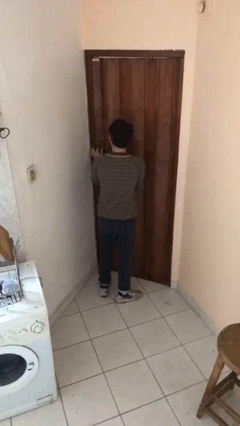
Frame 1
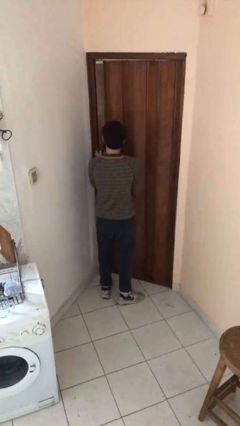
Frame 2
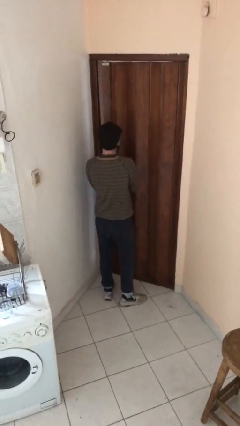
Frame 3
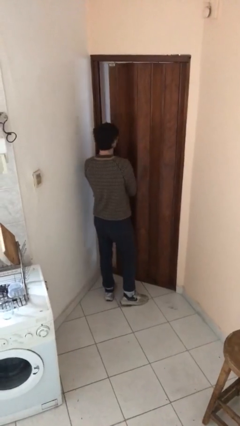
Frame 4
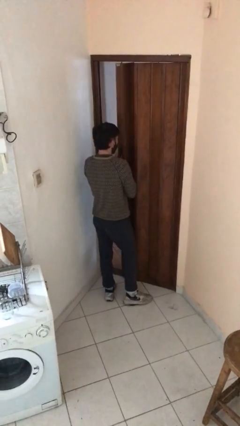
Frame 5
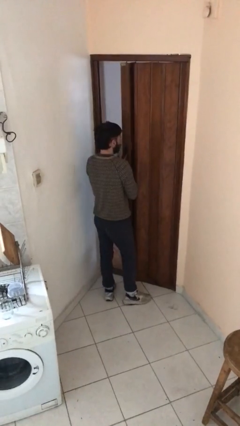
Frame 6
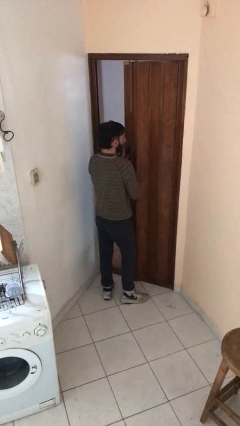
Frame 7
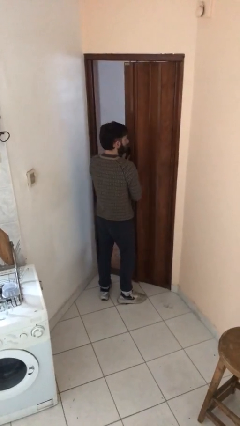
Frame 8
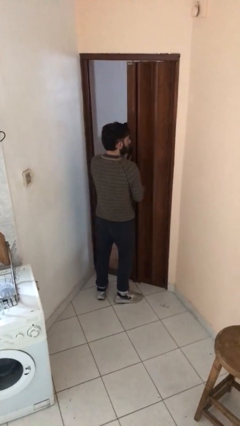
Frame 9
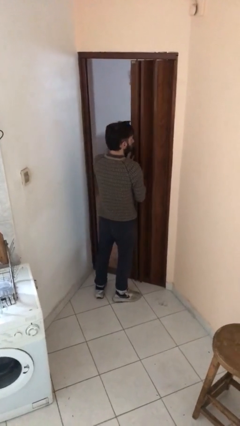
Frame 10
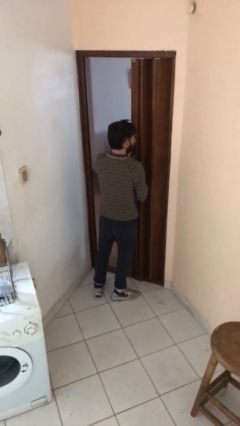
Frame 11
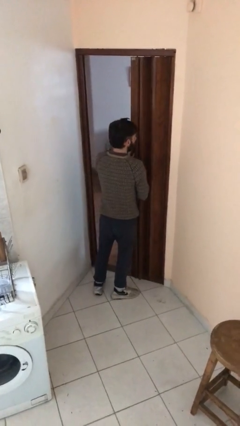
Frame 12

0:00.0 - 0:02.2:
person opens sliding door

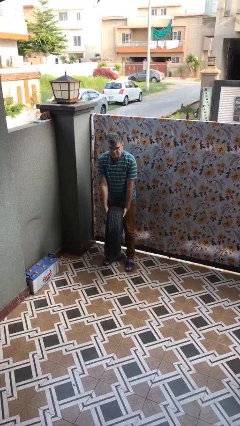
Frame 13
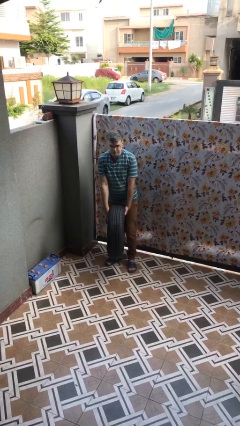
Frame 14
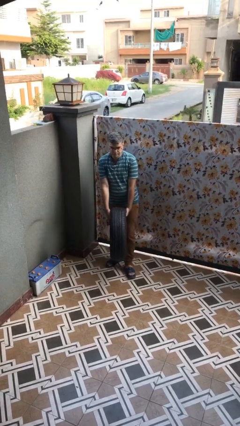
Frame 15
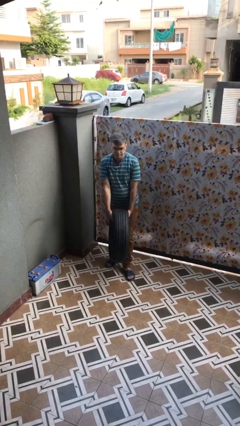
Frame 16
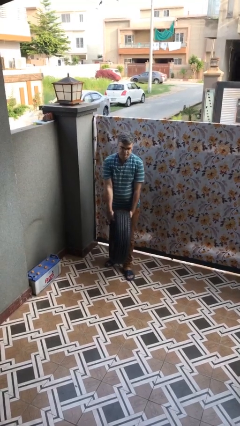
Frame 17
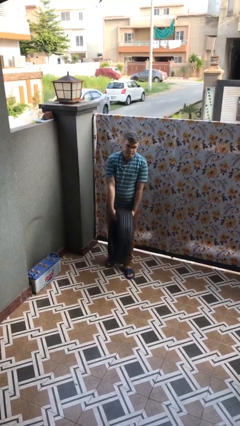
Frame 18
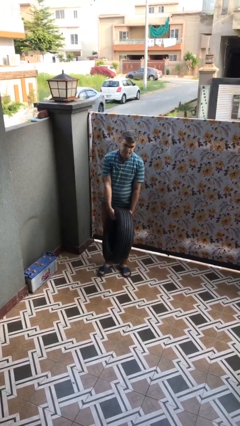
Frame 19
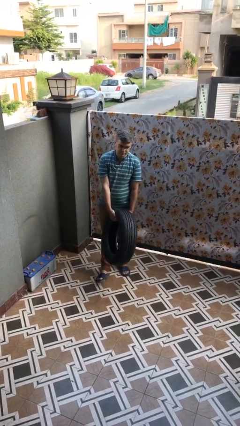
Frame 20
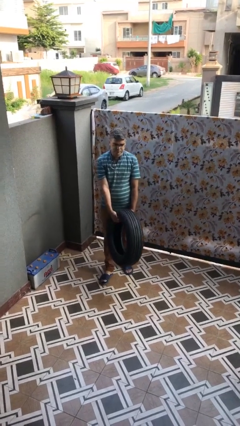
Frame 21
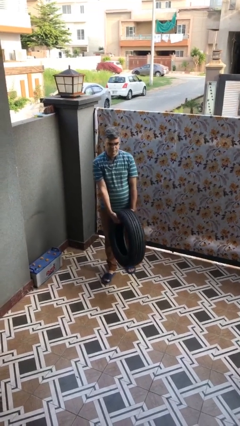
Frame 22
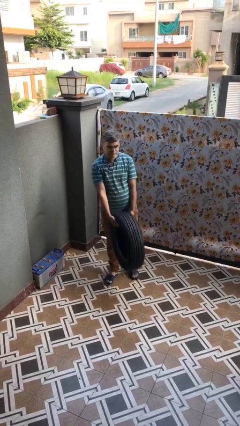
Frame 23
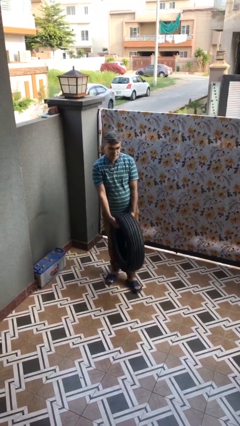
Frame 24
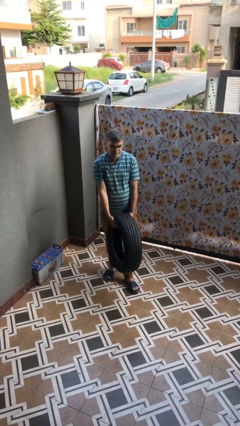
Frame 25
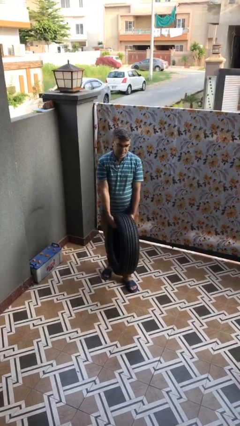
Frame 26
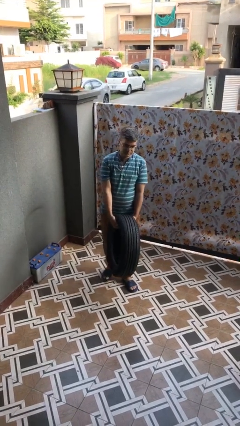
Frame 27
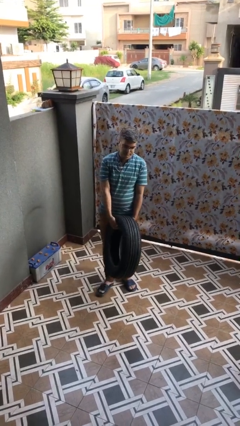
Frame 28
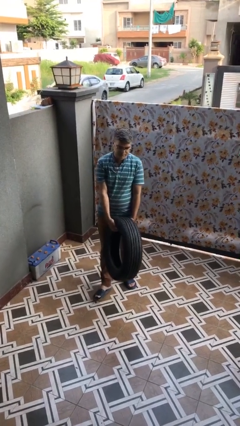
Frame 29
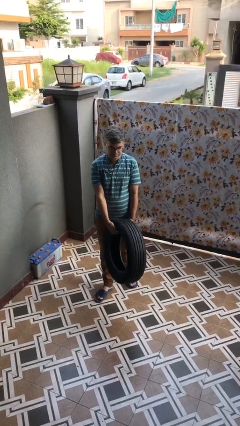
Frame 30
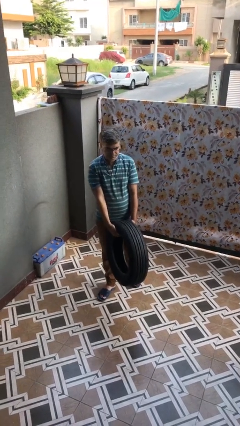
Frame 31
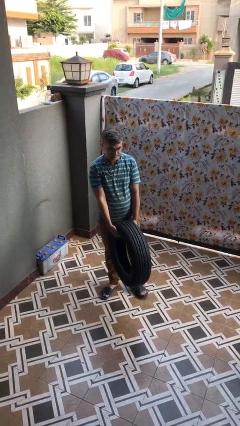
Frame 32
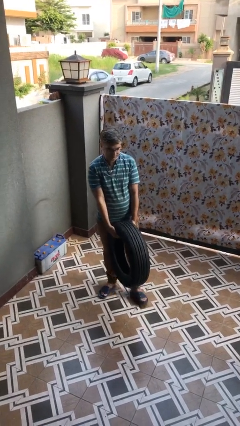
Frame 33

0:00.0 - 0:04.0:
person carries heavy object

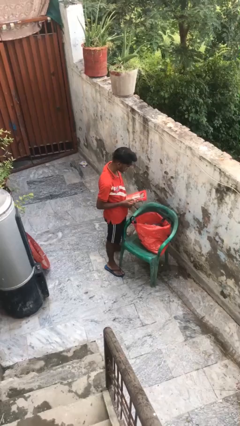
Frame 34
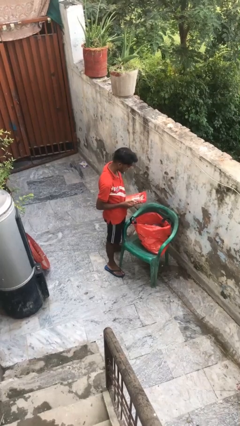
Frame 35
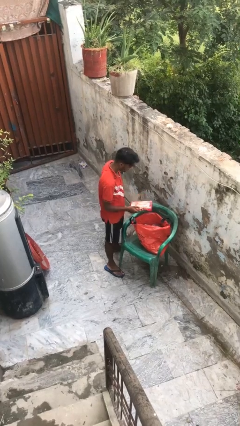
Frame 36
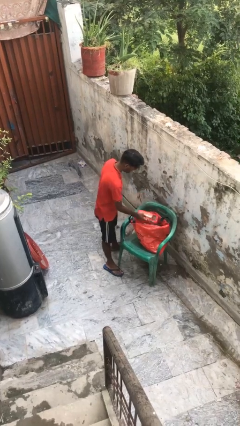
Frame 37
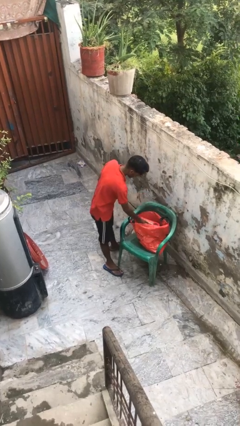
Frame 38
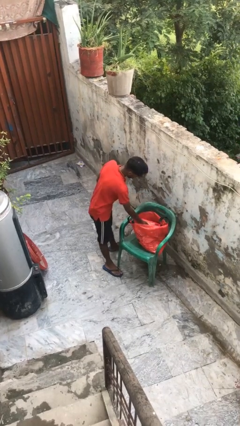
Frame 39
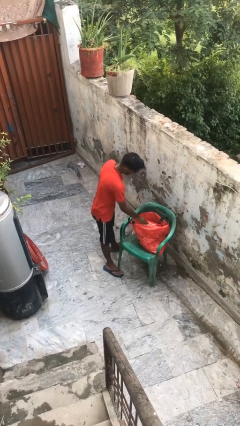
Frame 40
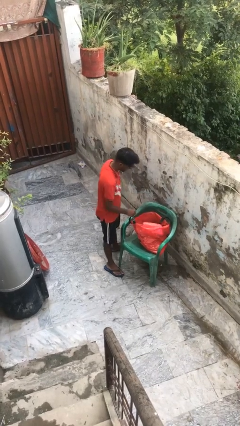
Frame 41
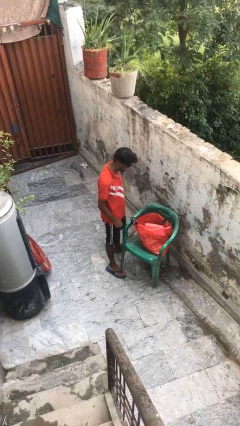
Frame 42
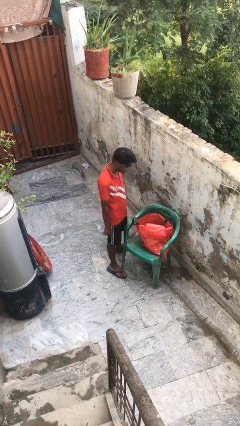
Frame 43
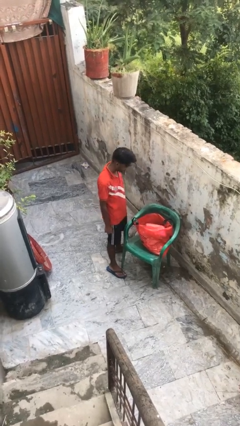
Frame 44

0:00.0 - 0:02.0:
person puts object into bag

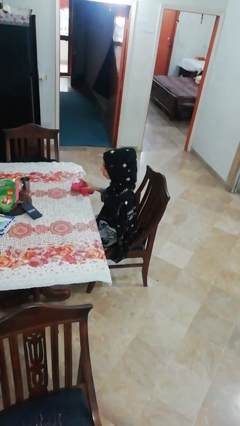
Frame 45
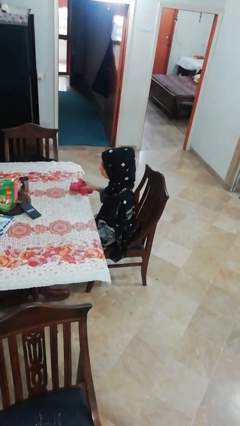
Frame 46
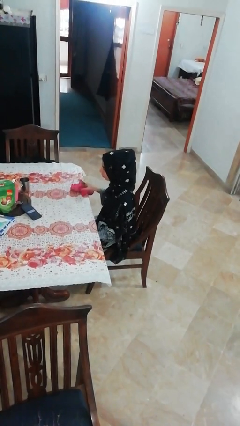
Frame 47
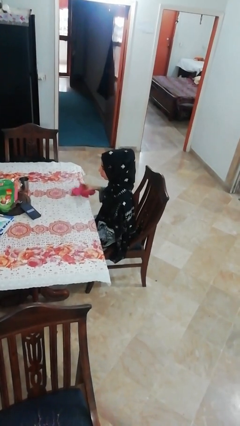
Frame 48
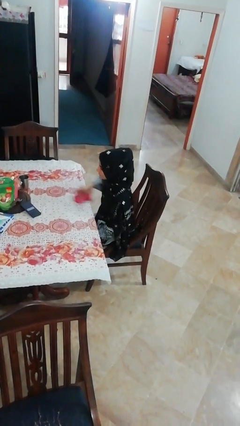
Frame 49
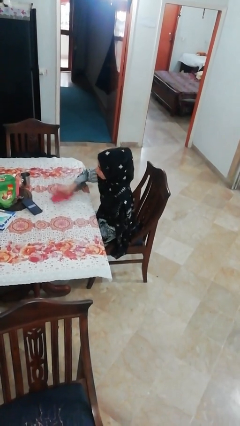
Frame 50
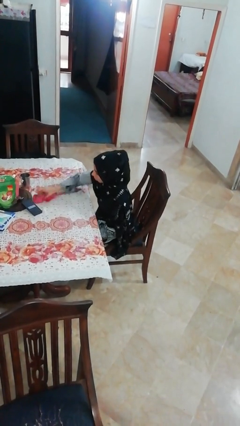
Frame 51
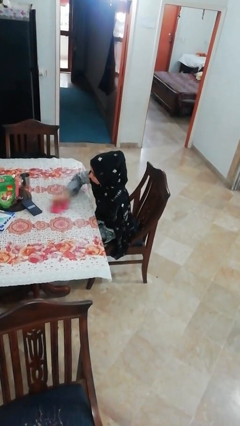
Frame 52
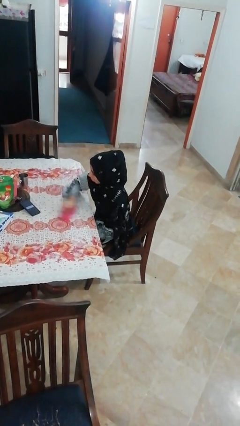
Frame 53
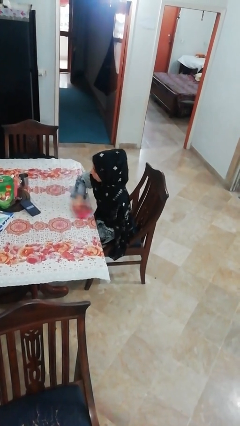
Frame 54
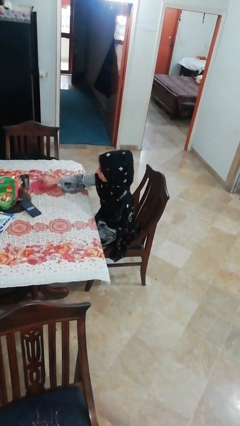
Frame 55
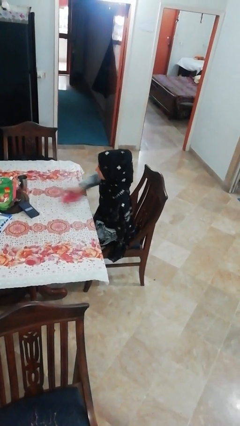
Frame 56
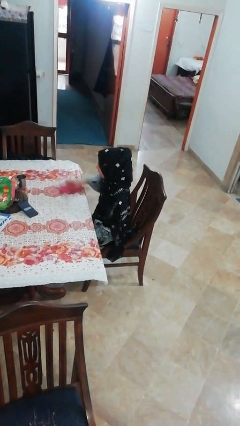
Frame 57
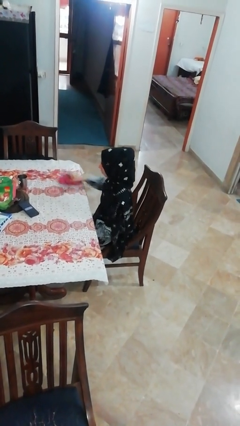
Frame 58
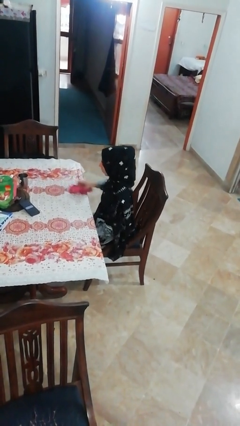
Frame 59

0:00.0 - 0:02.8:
person cleans table with rag

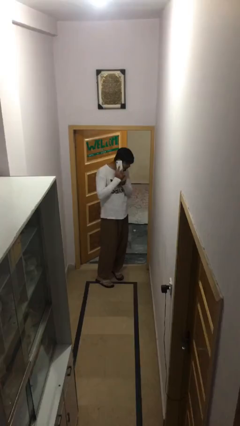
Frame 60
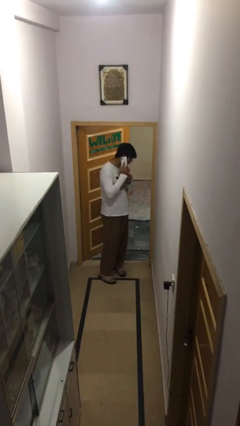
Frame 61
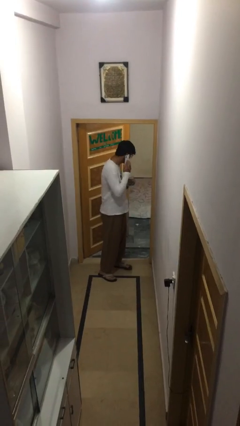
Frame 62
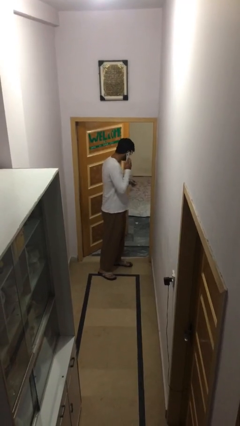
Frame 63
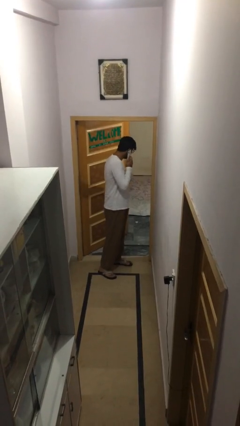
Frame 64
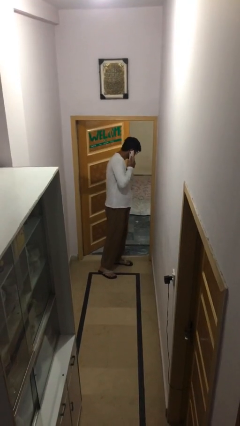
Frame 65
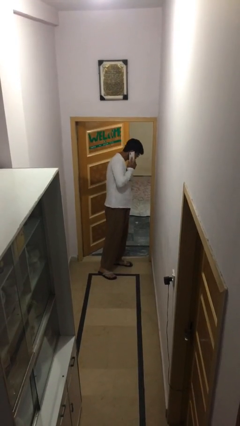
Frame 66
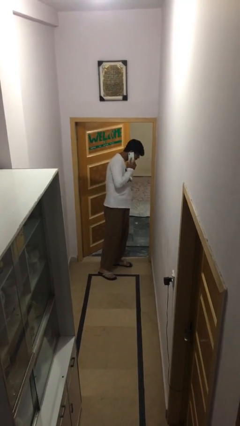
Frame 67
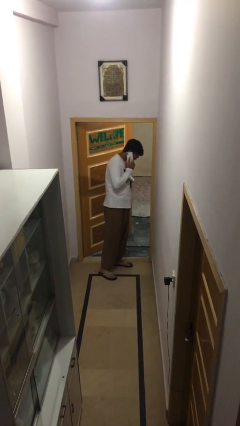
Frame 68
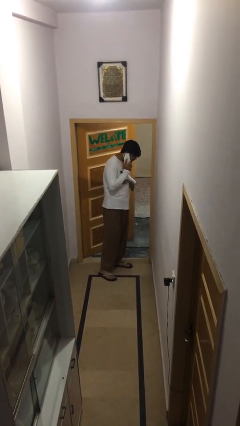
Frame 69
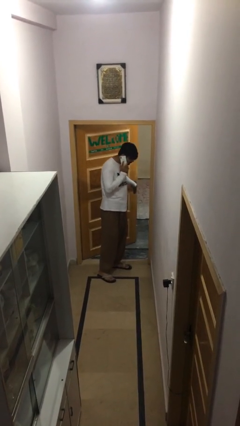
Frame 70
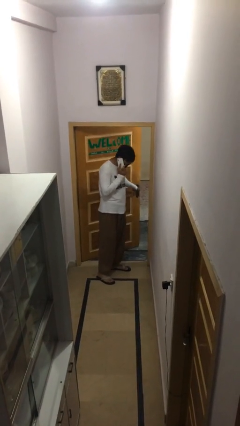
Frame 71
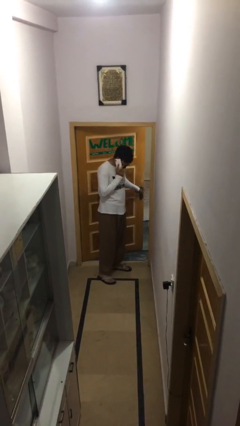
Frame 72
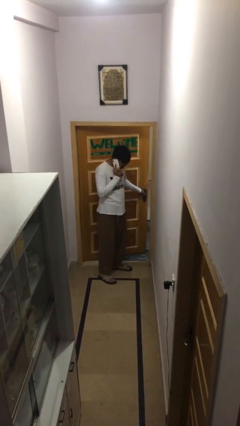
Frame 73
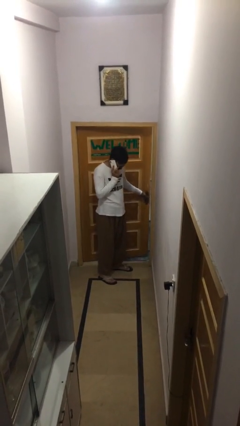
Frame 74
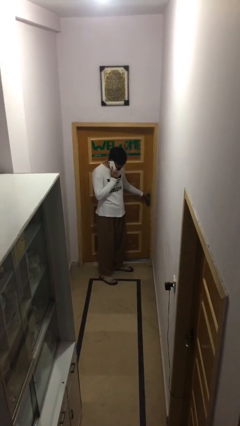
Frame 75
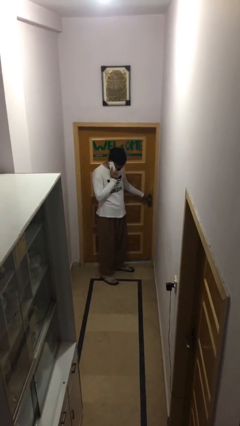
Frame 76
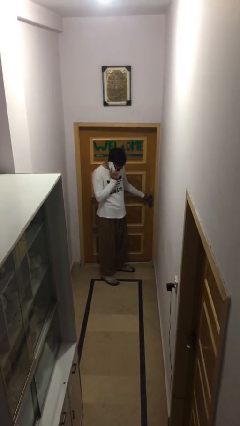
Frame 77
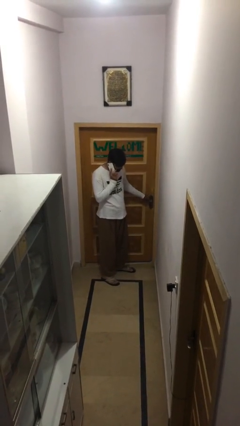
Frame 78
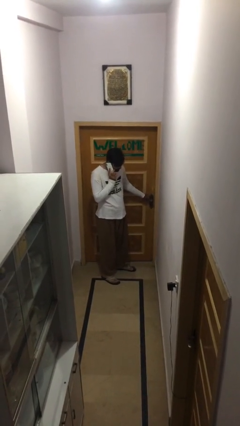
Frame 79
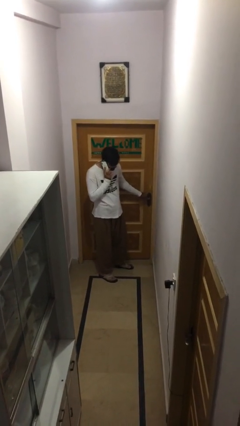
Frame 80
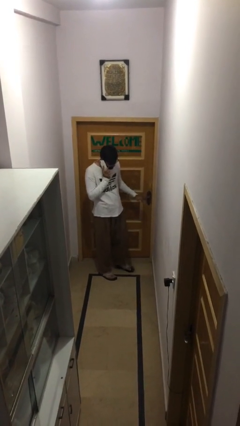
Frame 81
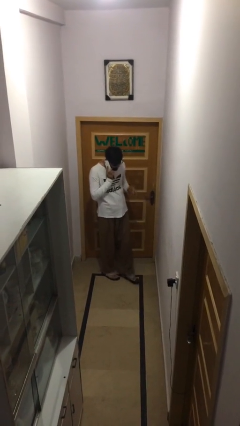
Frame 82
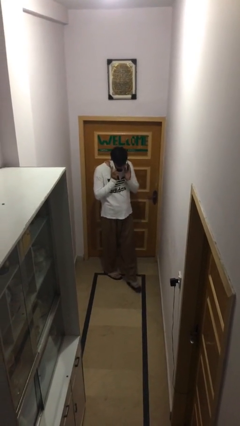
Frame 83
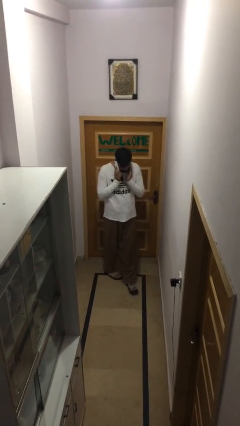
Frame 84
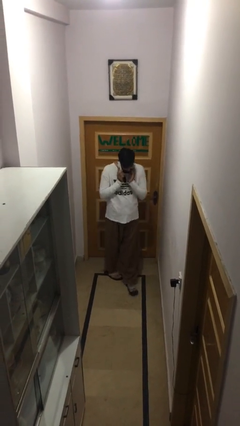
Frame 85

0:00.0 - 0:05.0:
person closes facility door

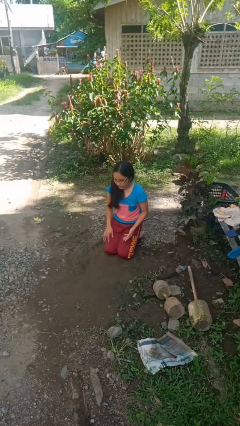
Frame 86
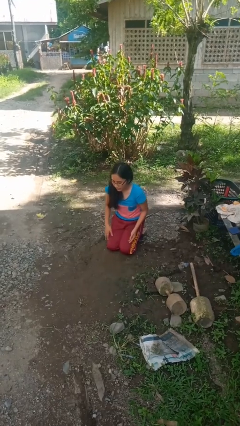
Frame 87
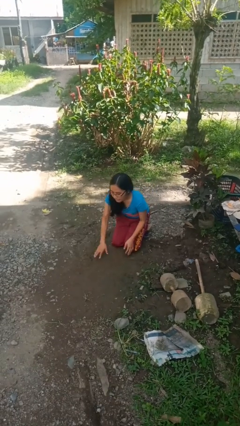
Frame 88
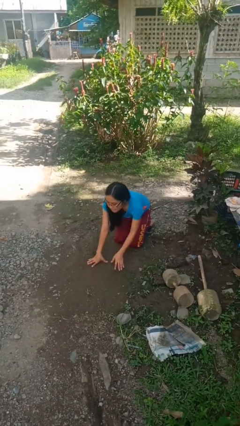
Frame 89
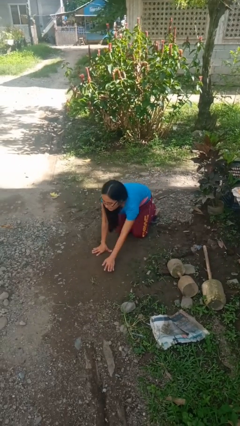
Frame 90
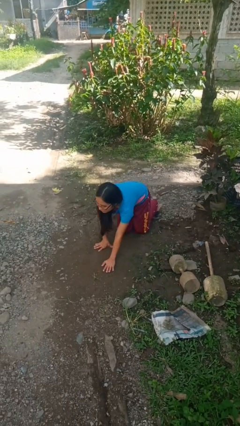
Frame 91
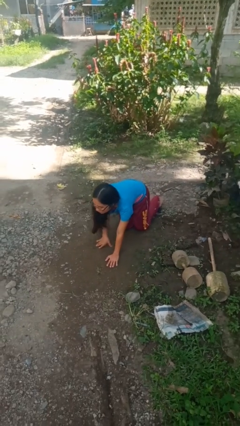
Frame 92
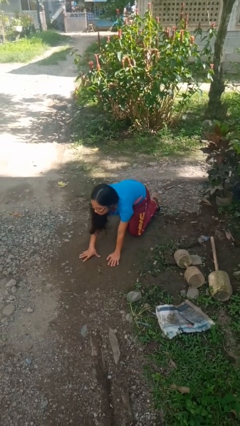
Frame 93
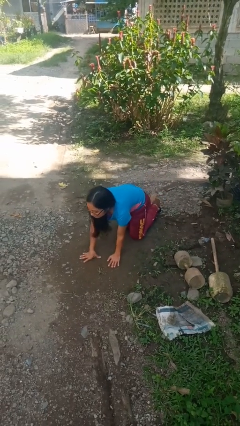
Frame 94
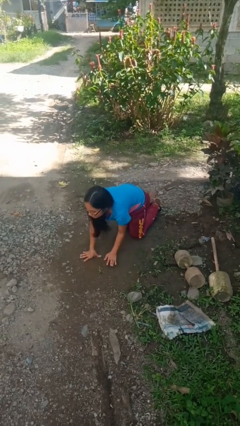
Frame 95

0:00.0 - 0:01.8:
person crawls
